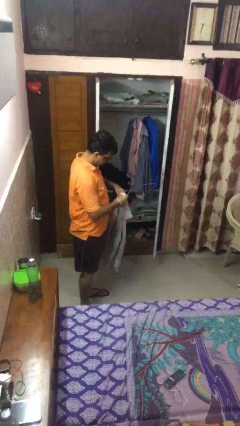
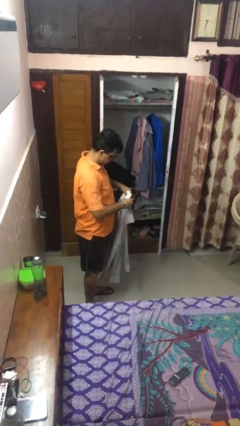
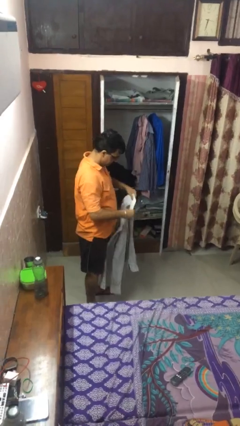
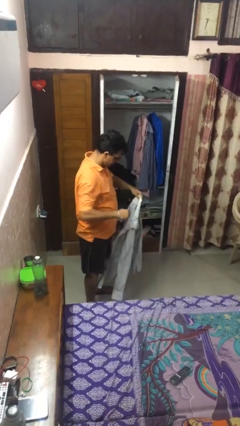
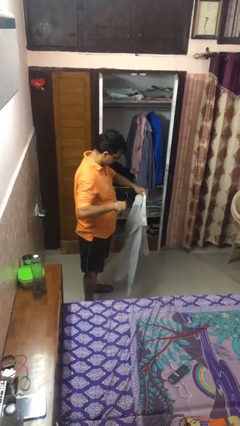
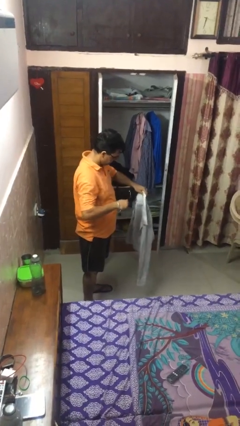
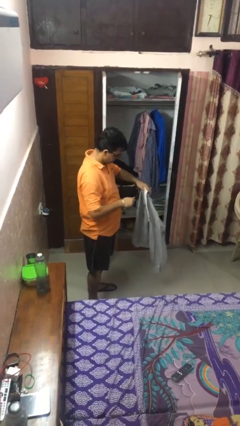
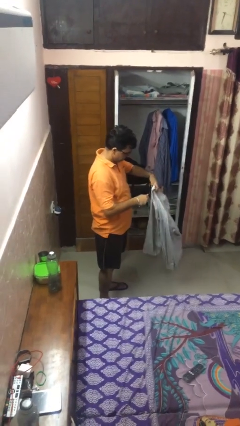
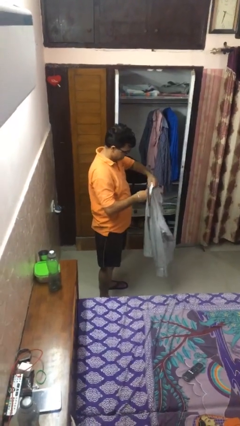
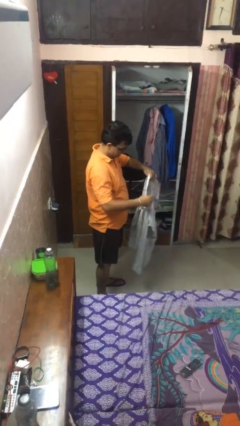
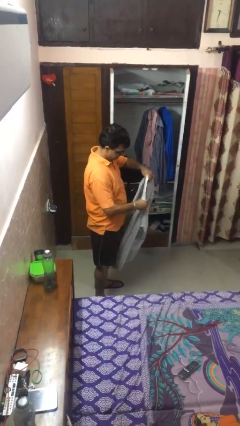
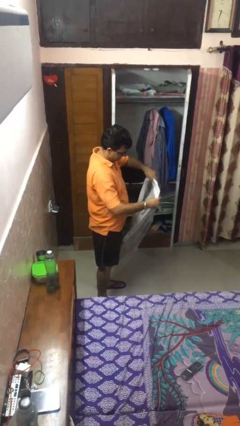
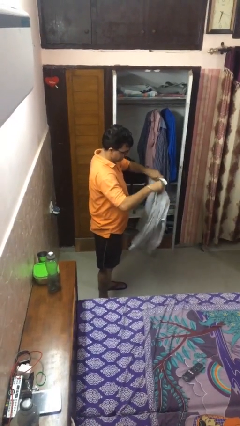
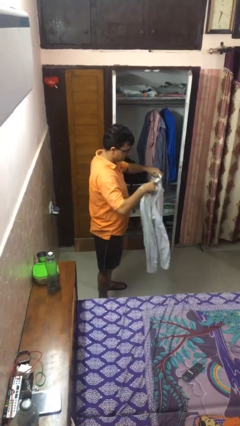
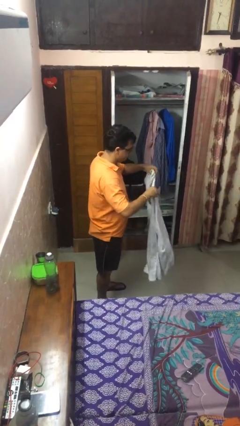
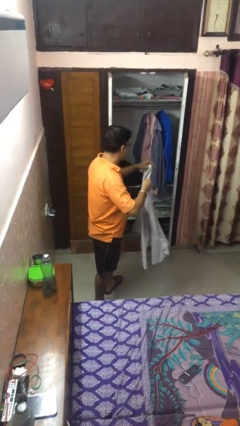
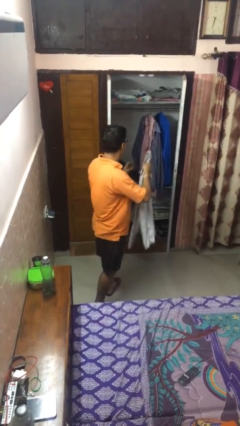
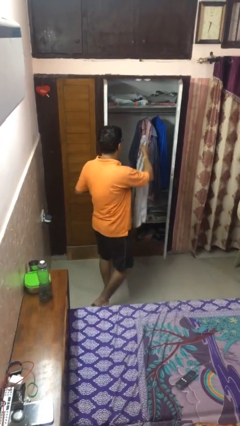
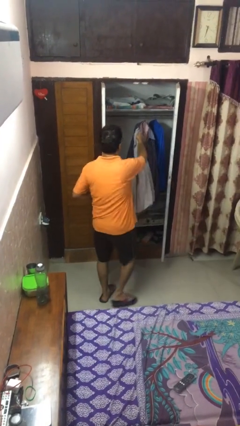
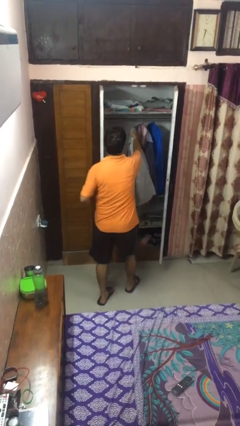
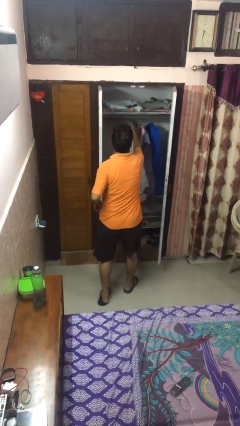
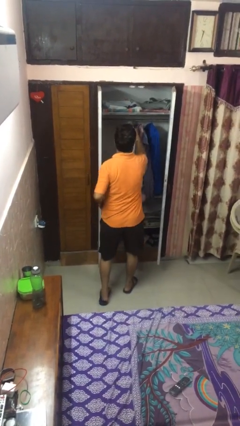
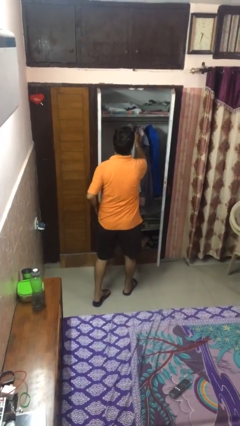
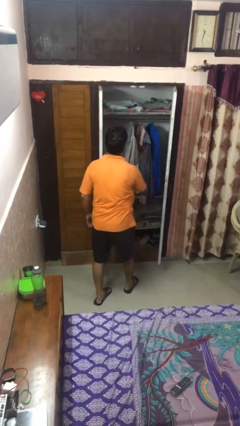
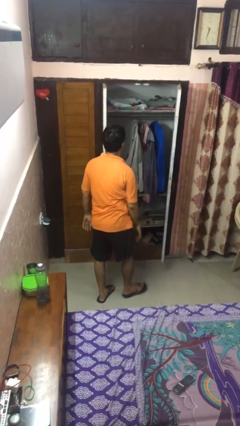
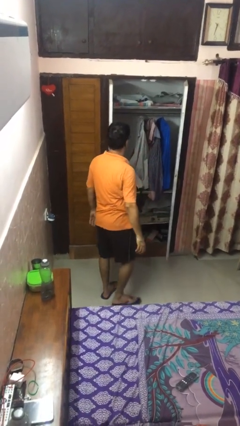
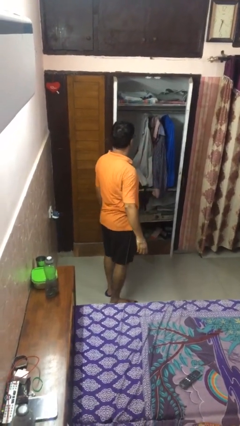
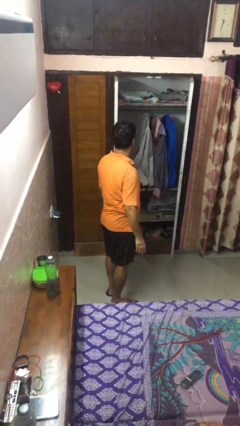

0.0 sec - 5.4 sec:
person puts clothes into closet

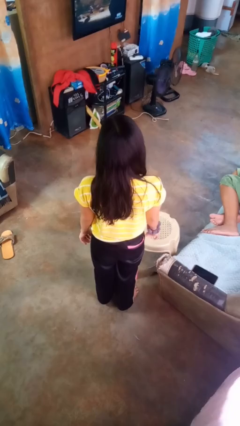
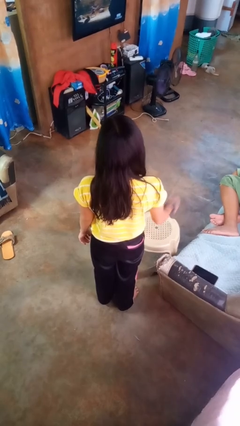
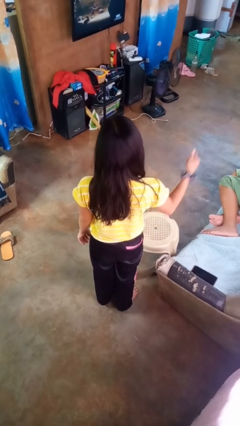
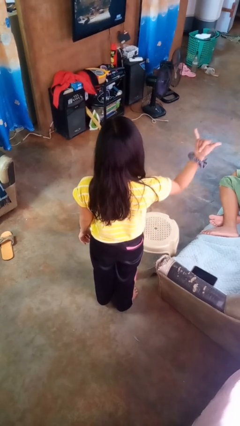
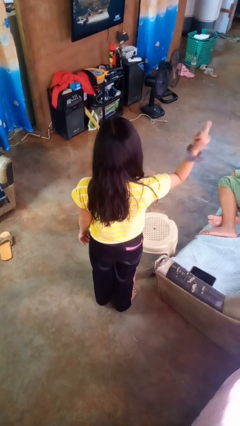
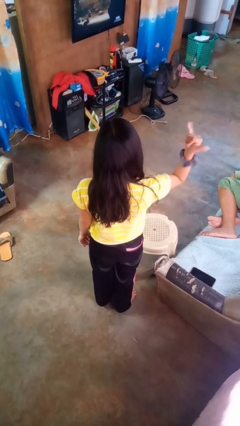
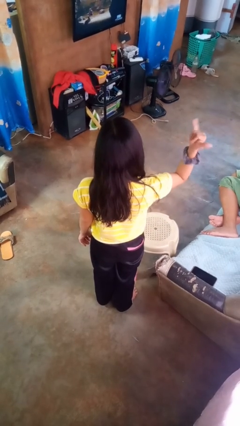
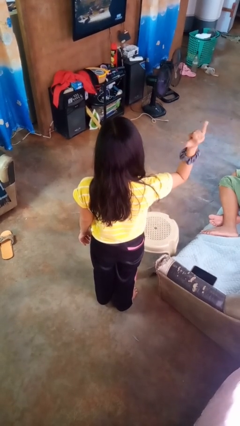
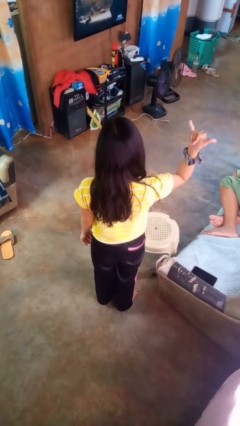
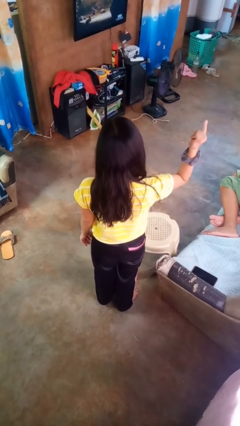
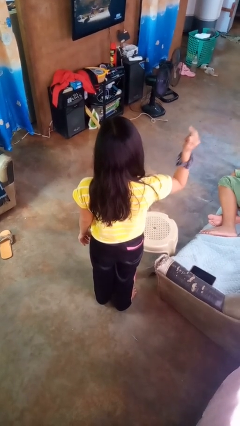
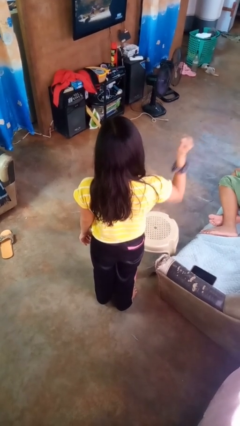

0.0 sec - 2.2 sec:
person gestures hang loose

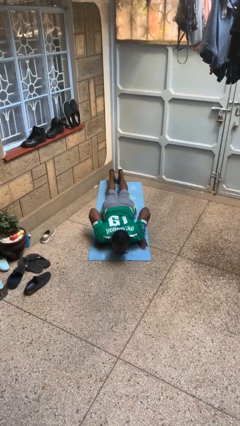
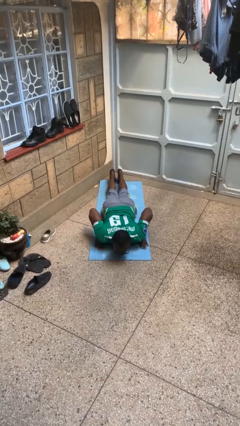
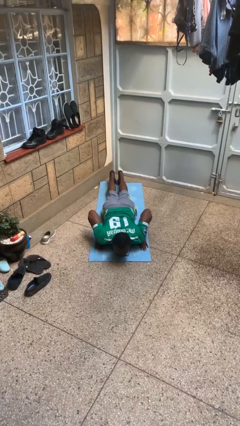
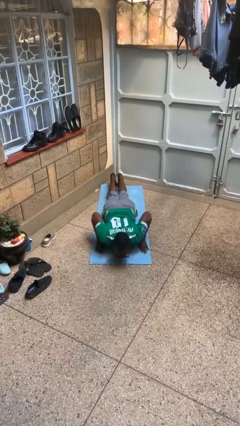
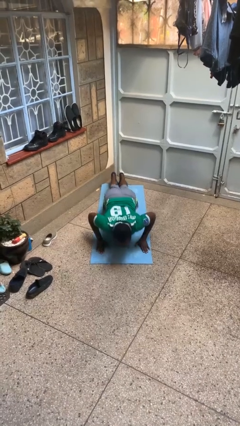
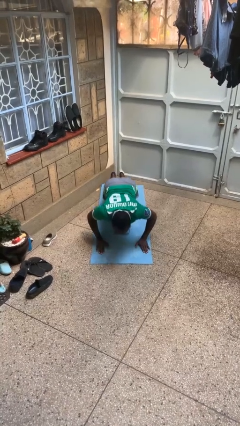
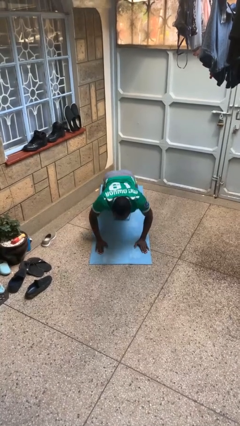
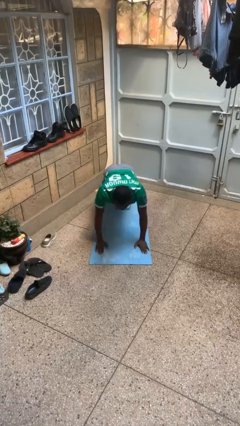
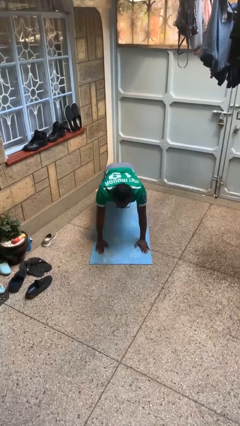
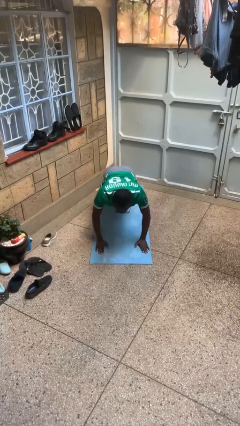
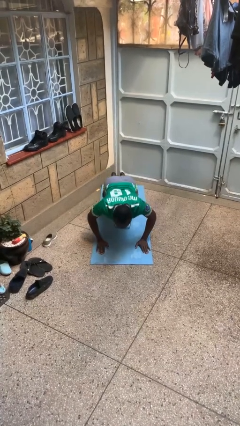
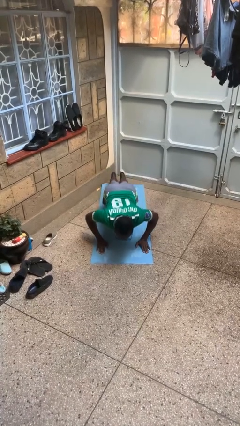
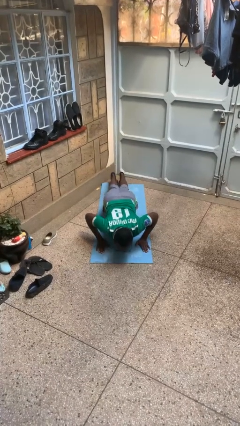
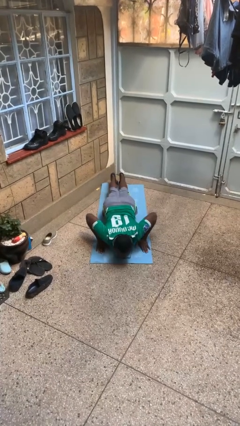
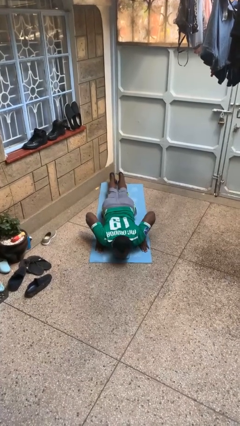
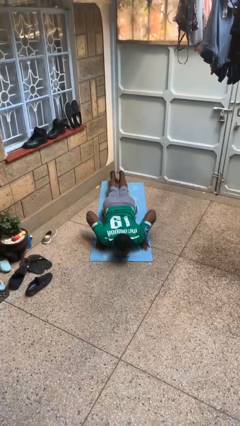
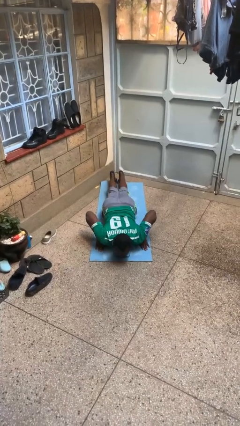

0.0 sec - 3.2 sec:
person exercises with pushup

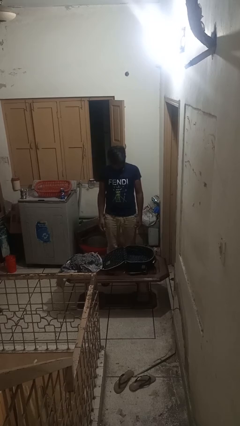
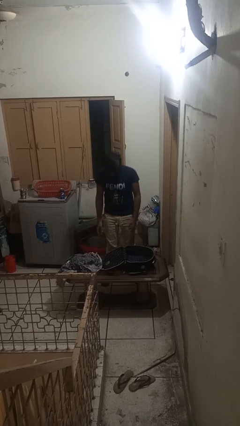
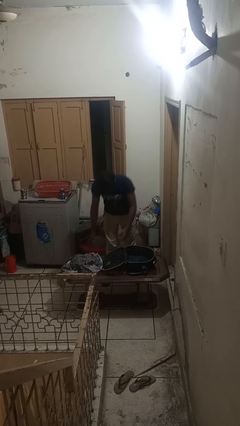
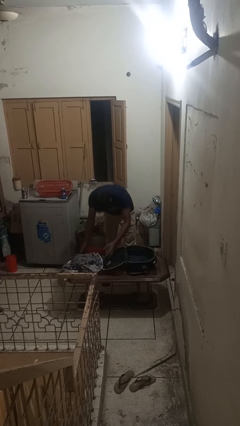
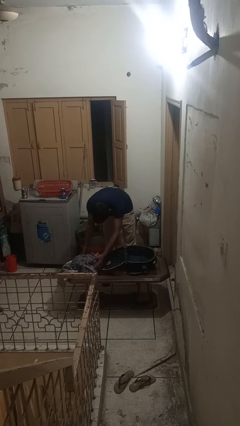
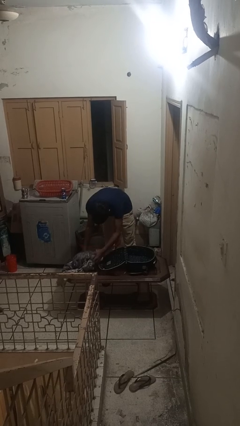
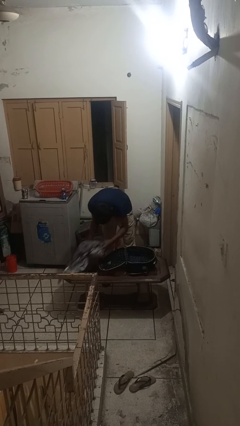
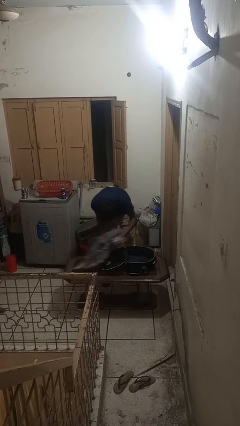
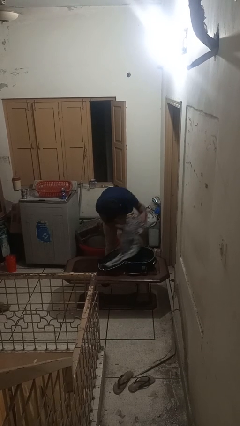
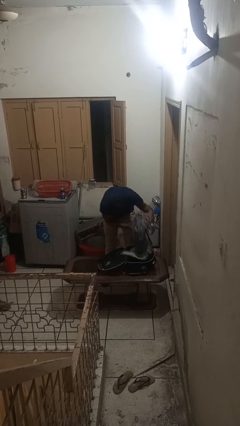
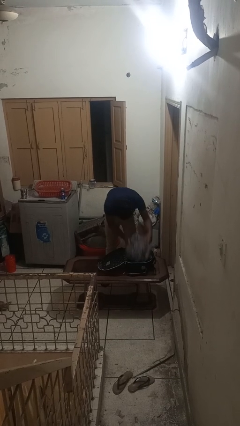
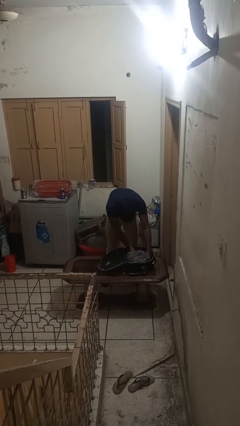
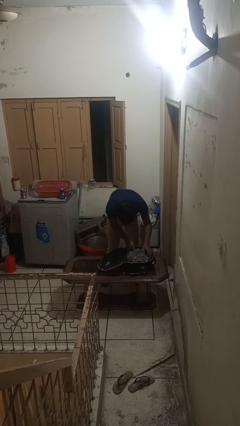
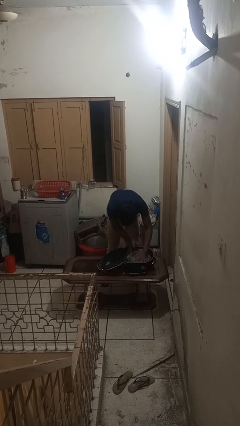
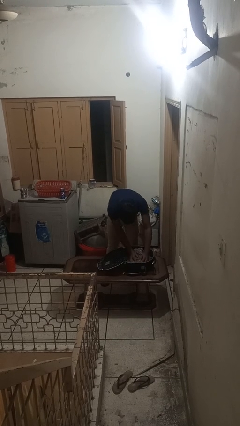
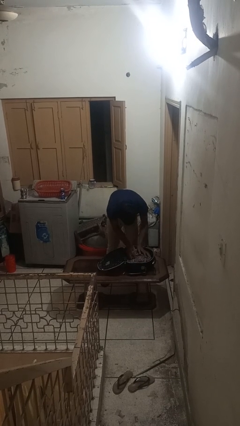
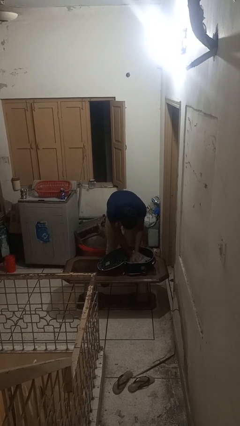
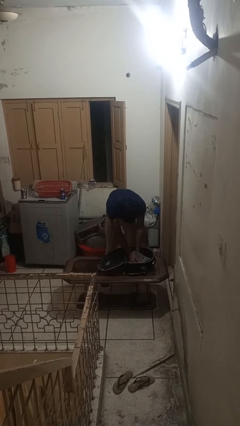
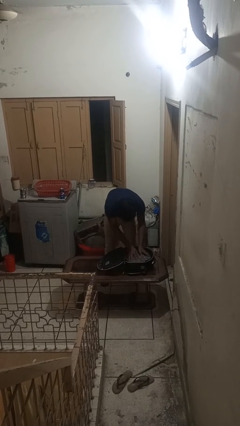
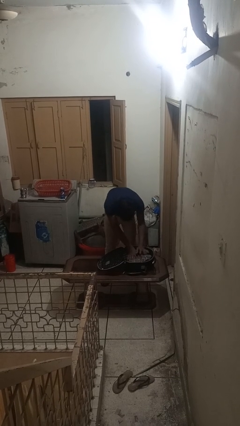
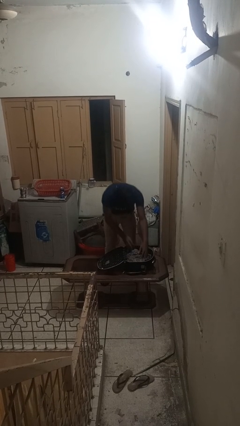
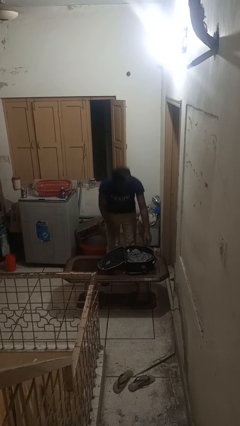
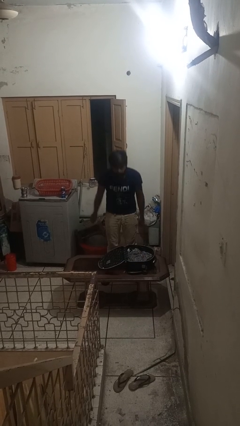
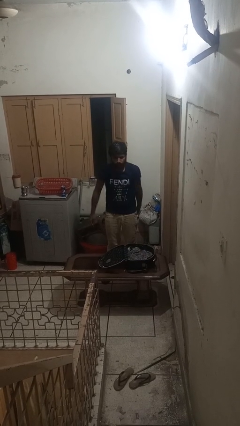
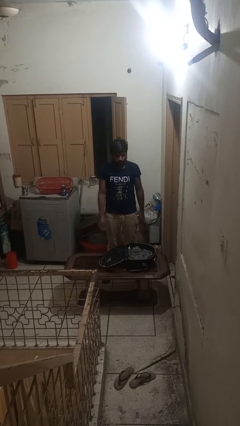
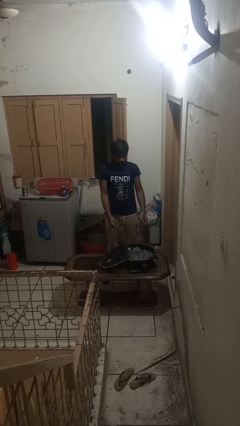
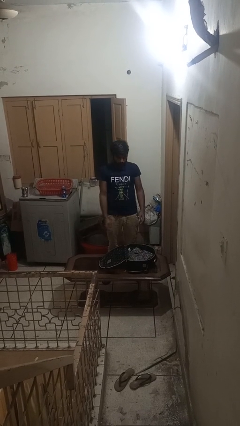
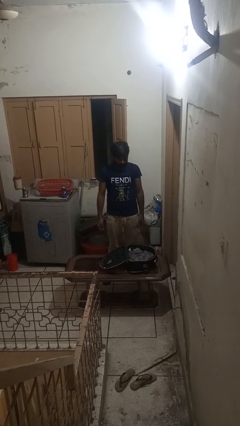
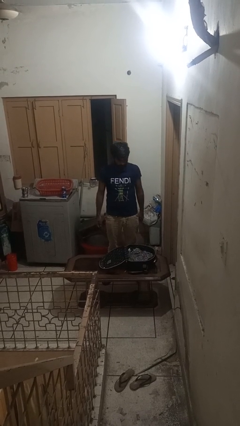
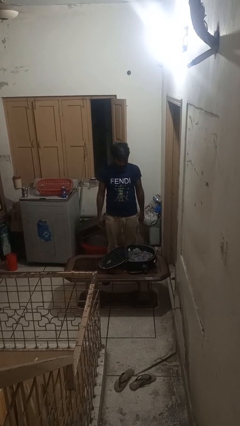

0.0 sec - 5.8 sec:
person loads clothes into suitcase

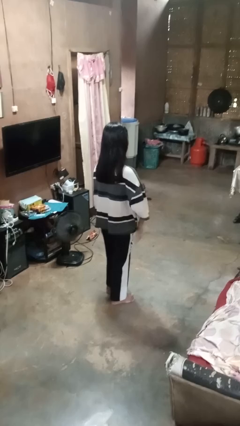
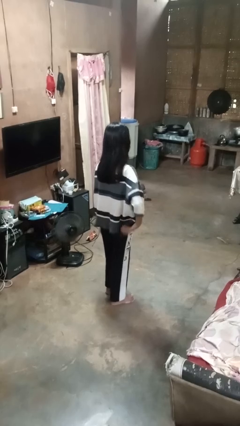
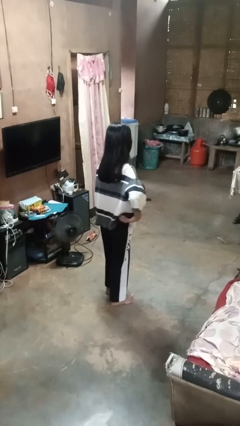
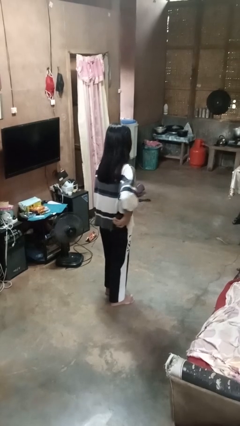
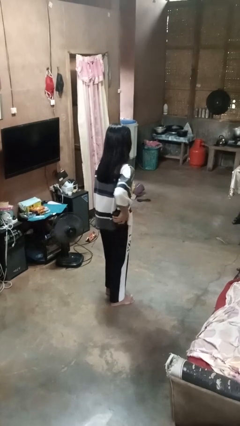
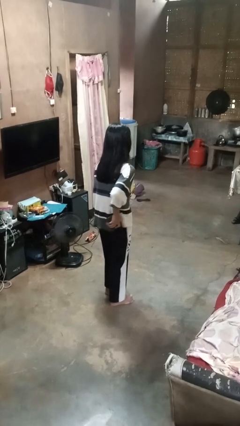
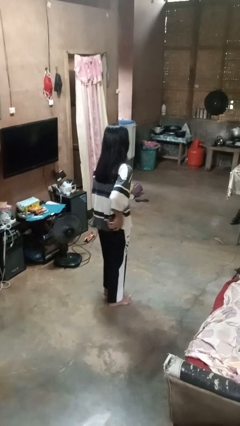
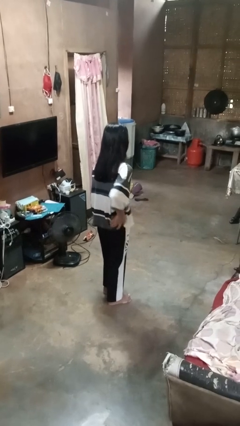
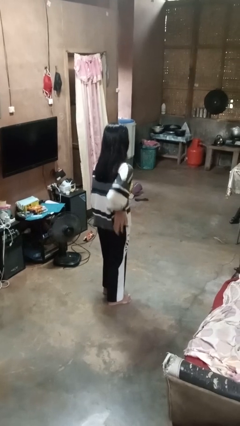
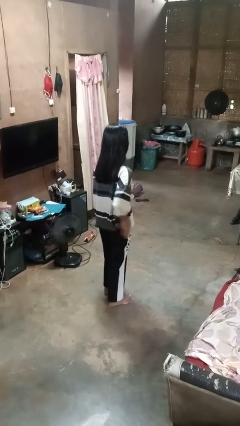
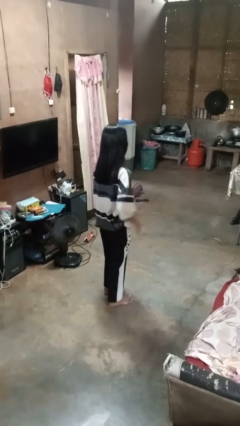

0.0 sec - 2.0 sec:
person puts phone into pocket
